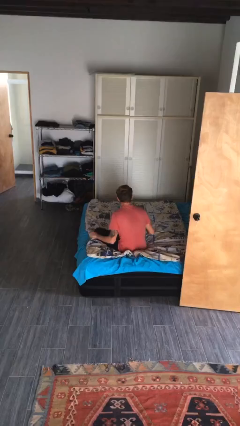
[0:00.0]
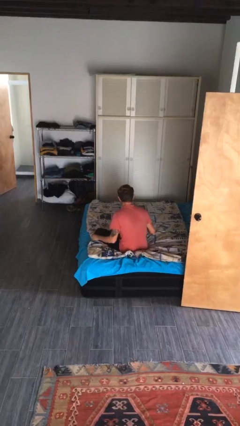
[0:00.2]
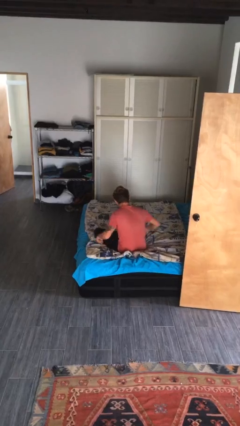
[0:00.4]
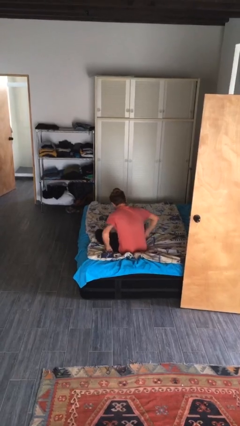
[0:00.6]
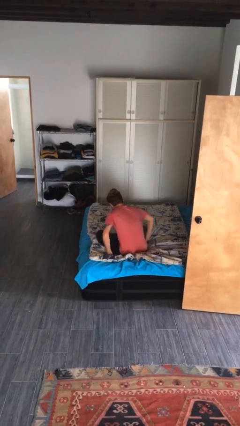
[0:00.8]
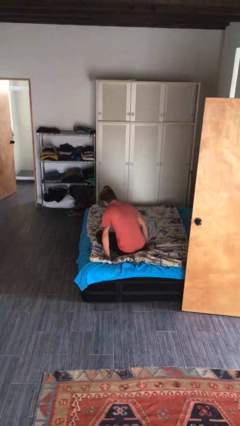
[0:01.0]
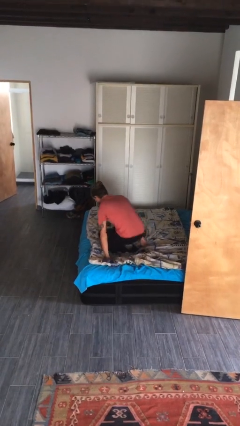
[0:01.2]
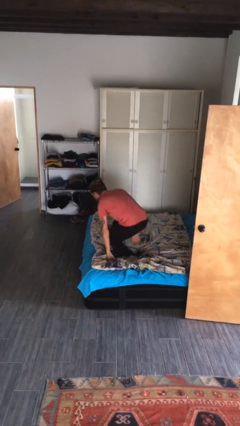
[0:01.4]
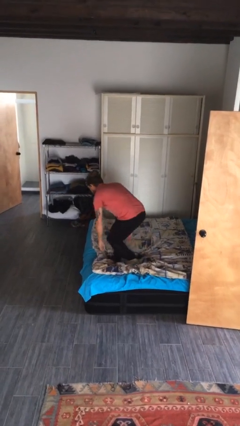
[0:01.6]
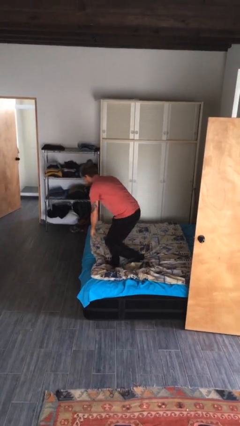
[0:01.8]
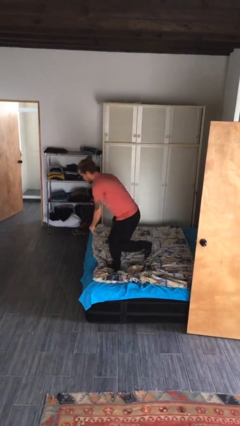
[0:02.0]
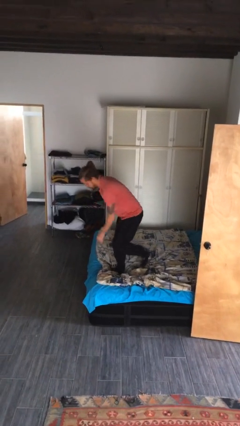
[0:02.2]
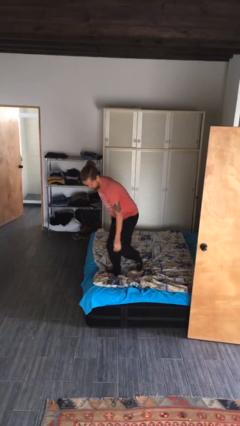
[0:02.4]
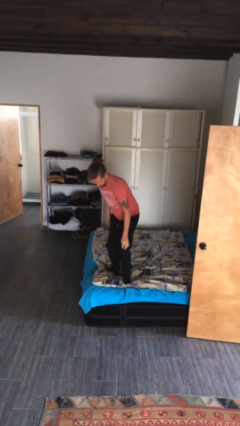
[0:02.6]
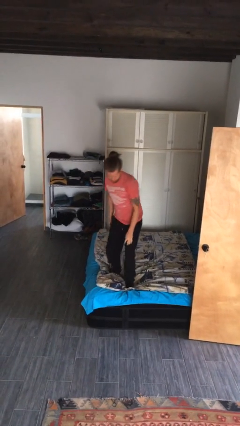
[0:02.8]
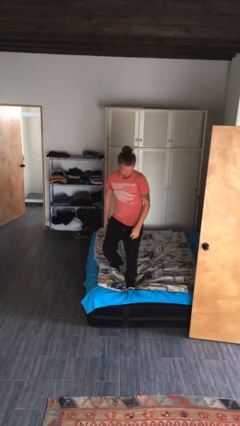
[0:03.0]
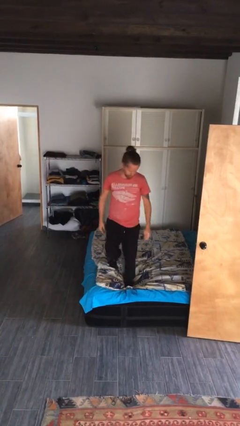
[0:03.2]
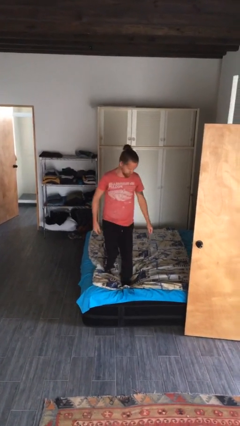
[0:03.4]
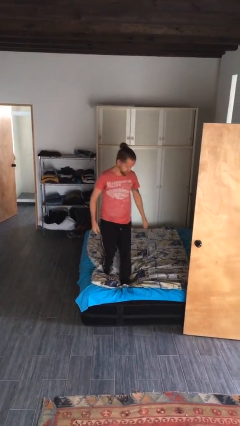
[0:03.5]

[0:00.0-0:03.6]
person stands up from floor

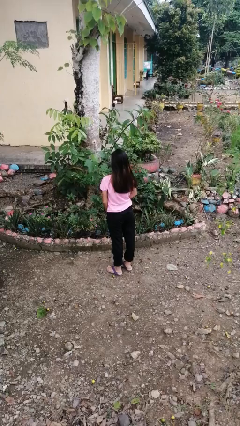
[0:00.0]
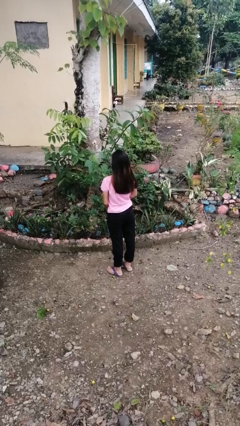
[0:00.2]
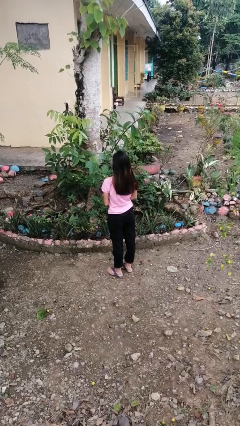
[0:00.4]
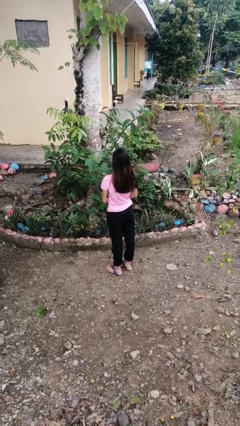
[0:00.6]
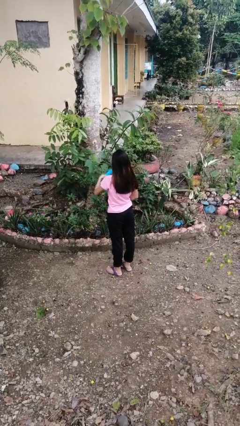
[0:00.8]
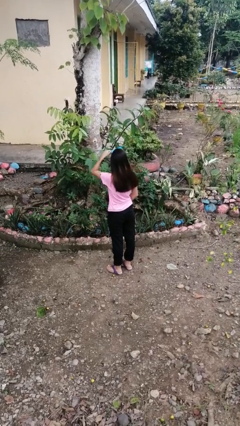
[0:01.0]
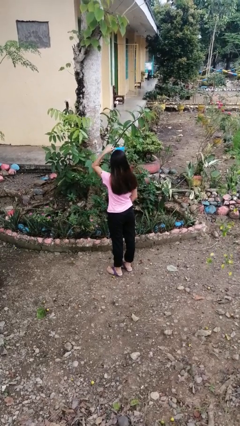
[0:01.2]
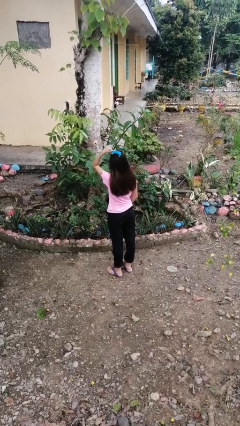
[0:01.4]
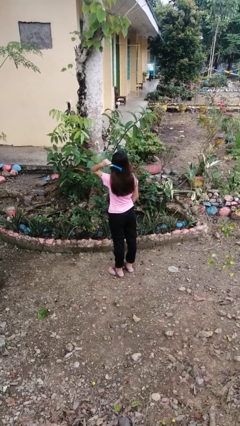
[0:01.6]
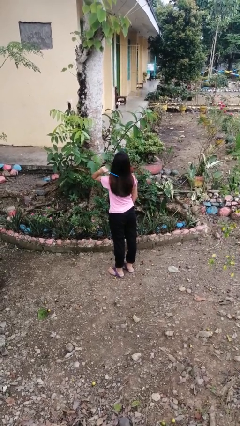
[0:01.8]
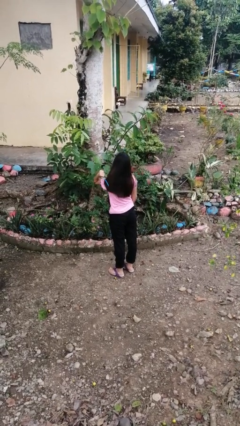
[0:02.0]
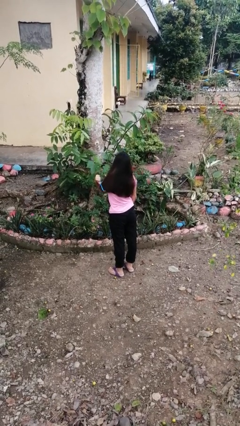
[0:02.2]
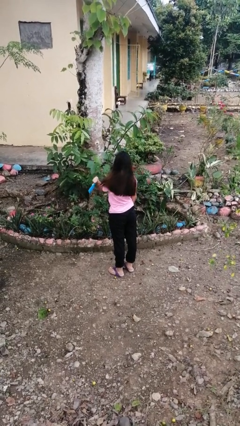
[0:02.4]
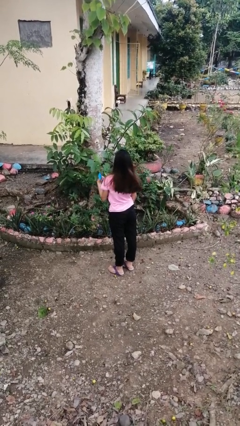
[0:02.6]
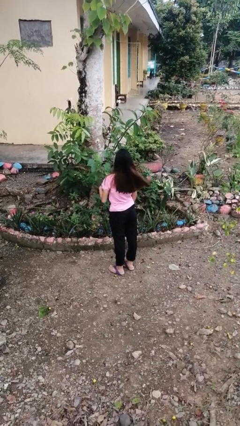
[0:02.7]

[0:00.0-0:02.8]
person brushes hair

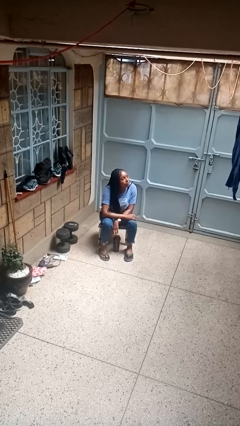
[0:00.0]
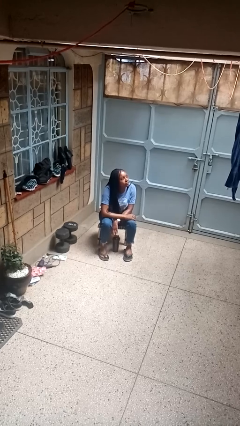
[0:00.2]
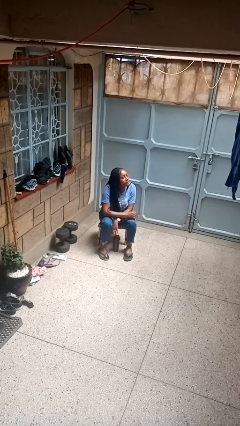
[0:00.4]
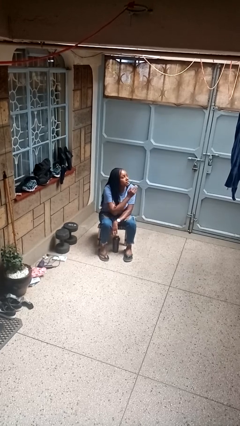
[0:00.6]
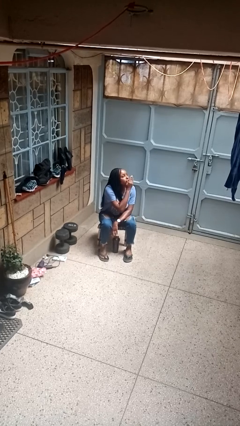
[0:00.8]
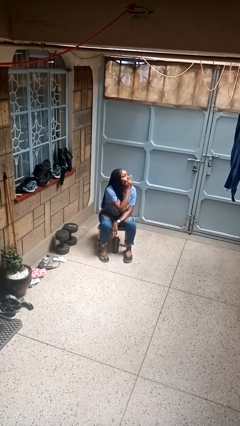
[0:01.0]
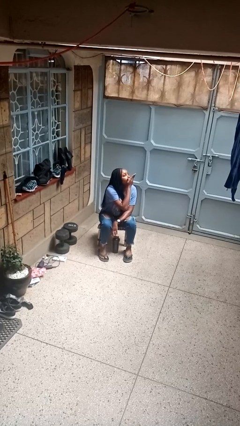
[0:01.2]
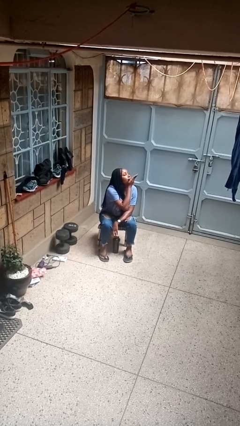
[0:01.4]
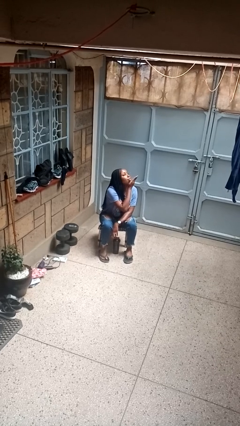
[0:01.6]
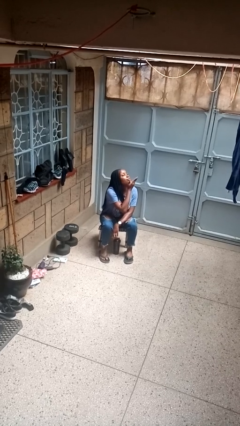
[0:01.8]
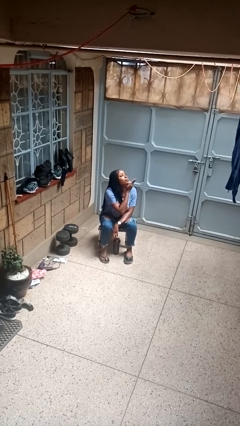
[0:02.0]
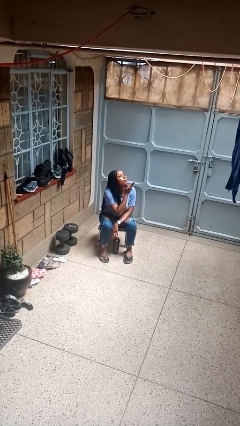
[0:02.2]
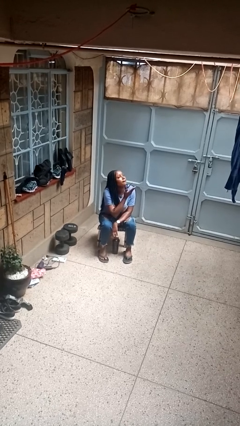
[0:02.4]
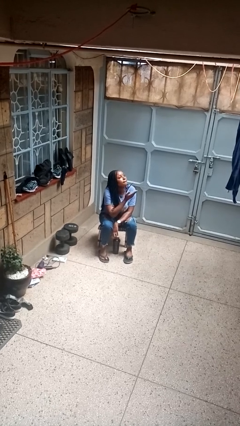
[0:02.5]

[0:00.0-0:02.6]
person gestures blow kiss

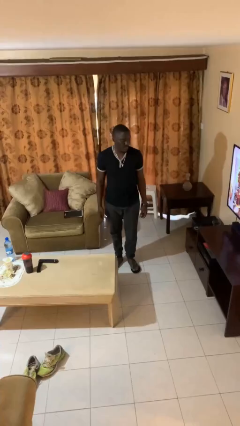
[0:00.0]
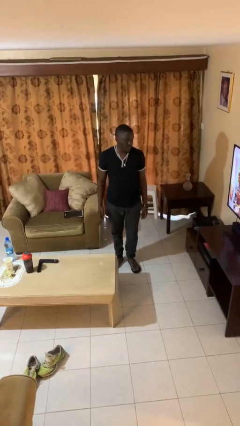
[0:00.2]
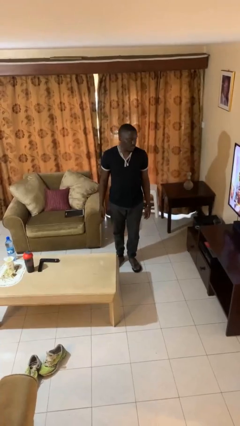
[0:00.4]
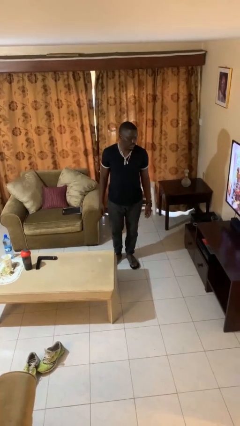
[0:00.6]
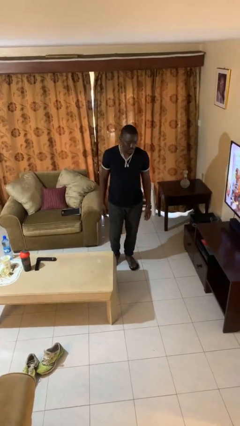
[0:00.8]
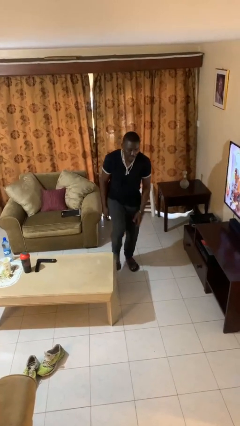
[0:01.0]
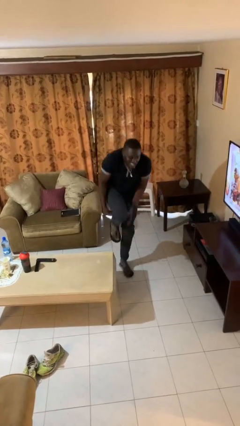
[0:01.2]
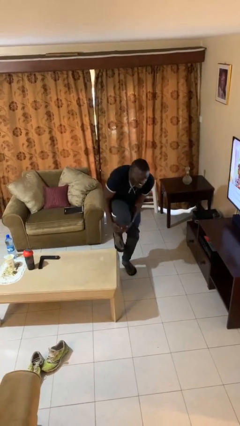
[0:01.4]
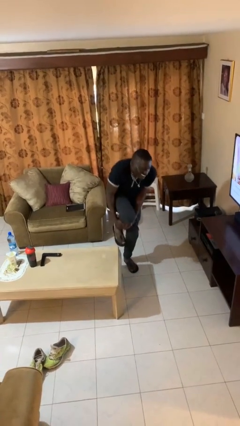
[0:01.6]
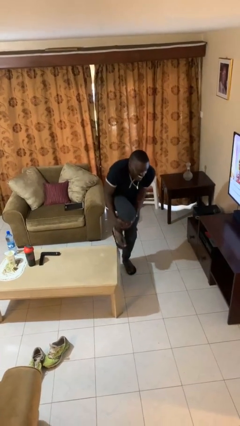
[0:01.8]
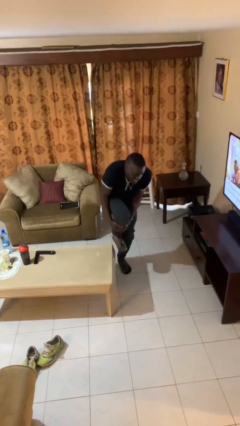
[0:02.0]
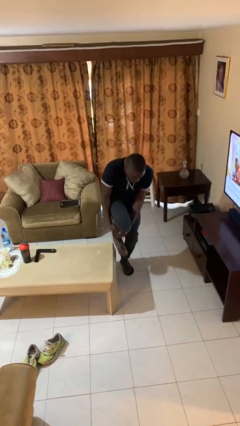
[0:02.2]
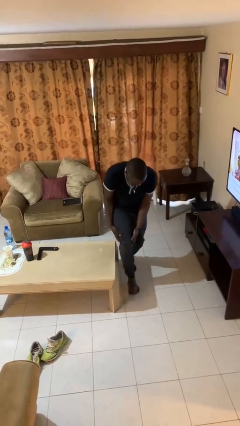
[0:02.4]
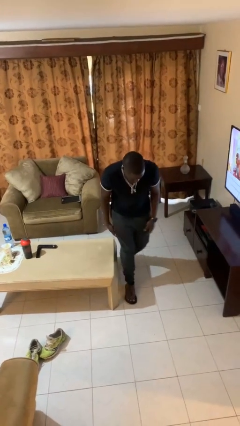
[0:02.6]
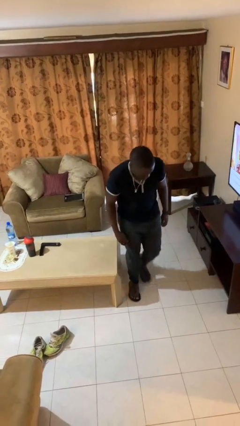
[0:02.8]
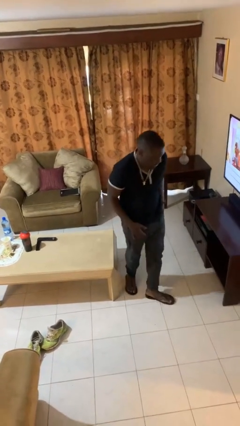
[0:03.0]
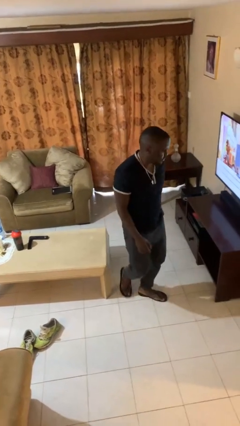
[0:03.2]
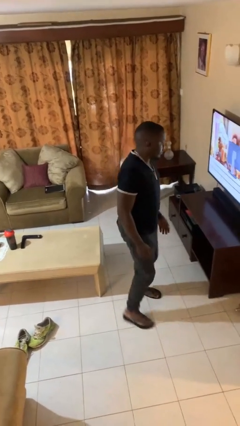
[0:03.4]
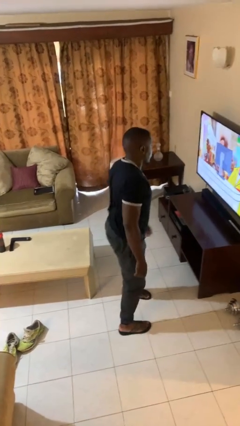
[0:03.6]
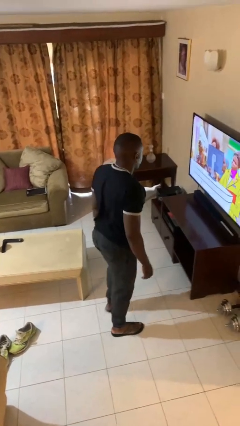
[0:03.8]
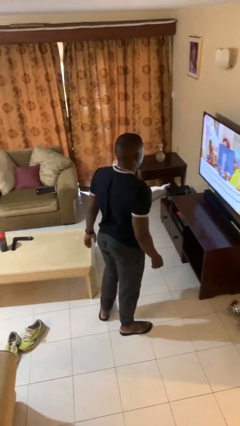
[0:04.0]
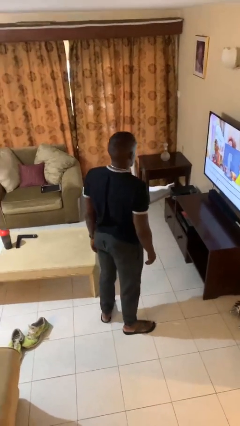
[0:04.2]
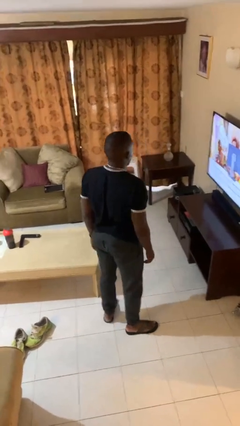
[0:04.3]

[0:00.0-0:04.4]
person bumps into table

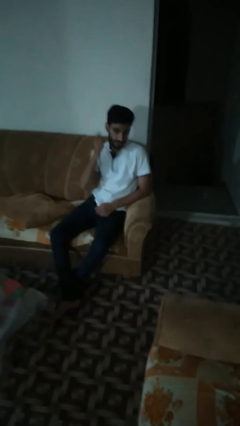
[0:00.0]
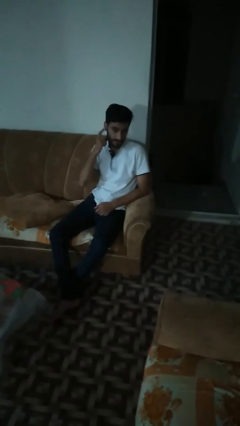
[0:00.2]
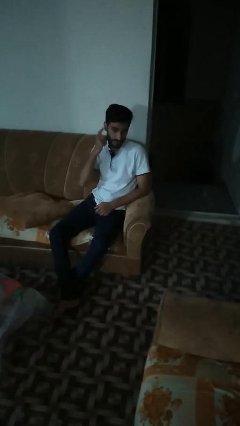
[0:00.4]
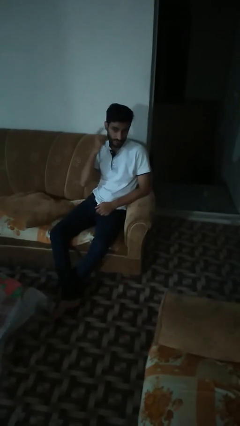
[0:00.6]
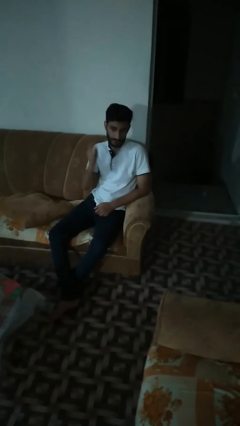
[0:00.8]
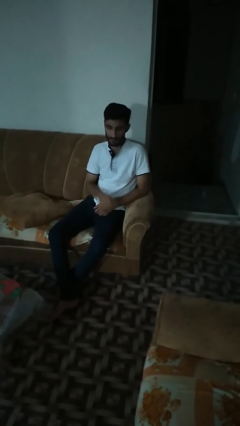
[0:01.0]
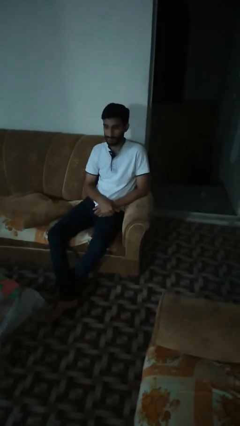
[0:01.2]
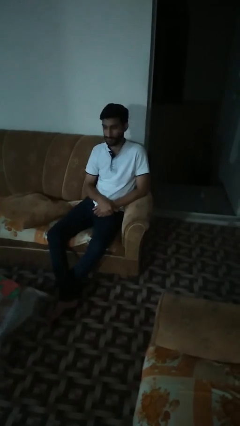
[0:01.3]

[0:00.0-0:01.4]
person gestures listen closely

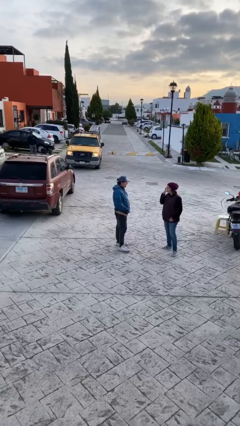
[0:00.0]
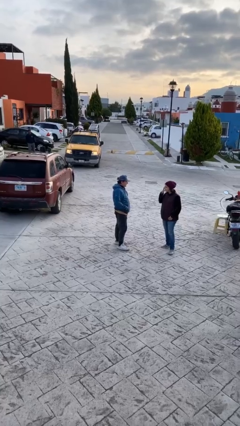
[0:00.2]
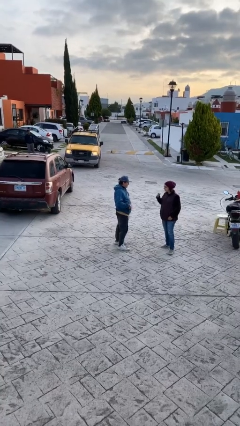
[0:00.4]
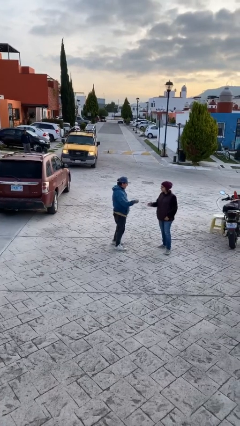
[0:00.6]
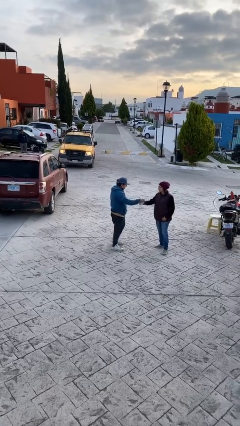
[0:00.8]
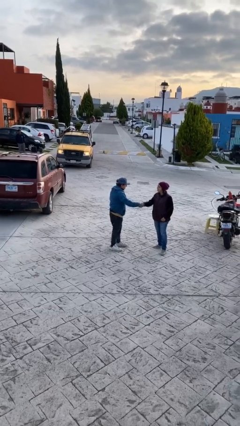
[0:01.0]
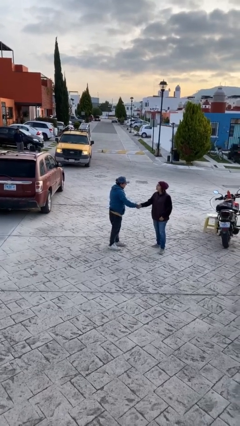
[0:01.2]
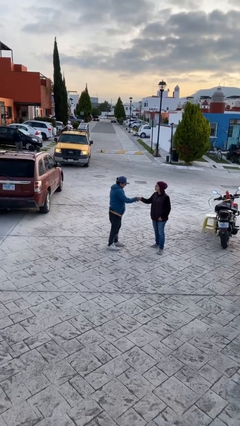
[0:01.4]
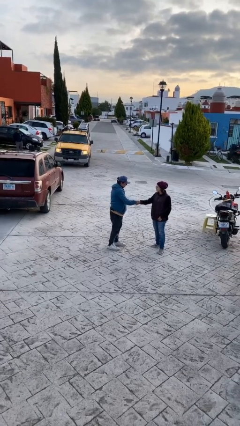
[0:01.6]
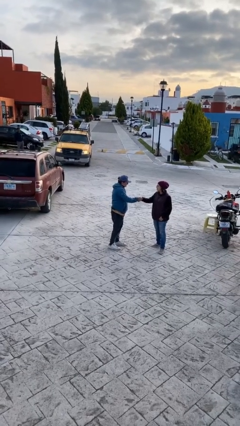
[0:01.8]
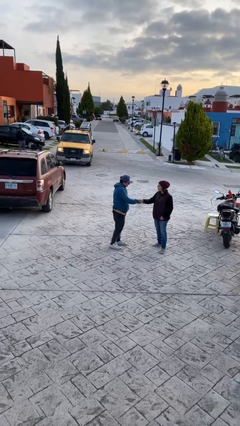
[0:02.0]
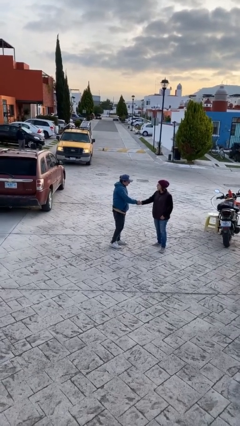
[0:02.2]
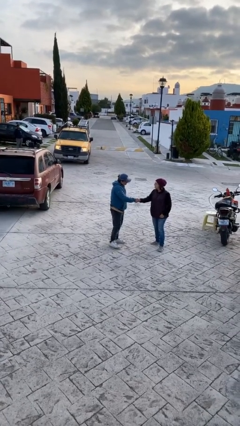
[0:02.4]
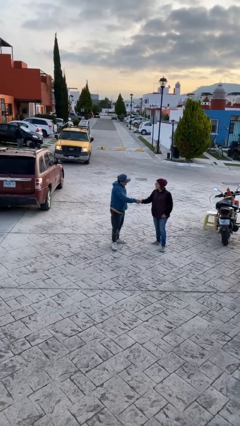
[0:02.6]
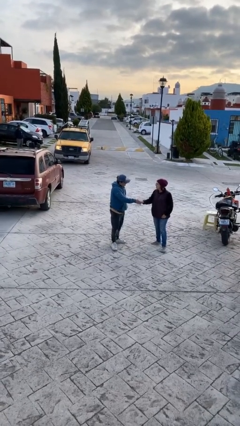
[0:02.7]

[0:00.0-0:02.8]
person shakes hand
